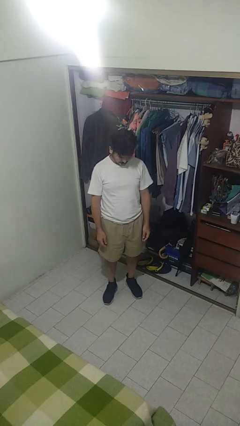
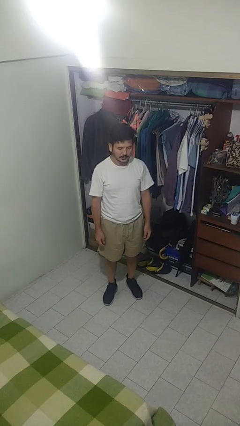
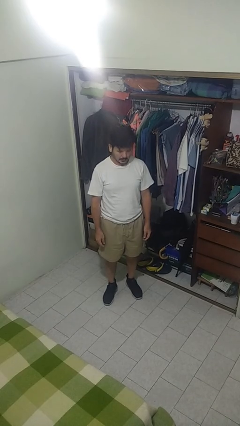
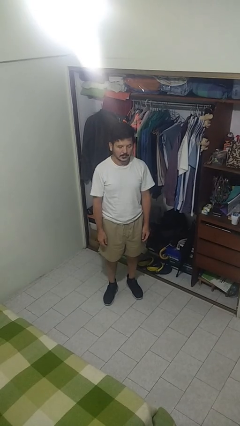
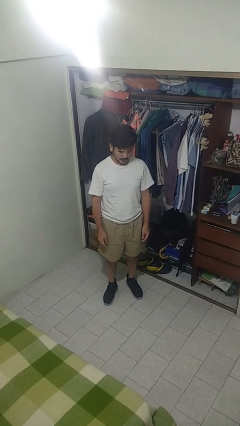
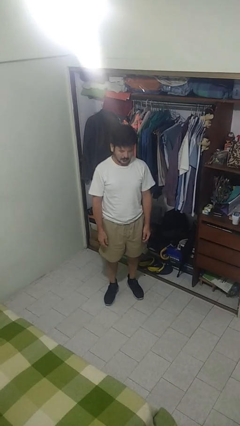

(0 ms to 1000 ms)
person nods head

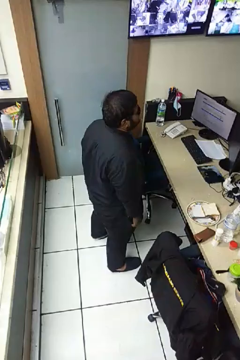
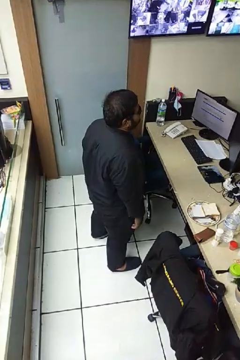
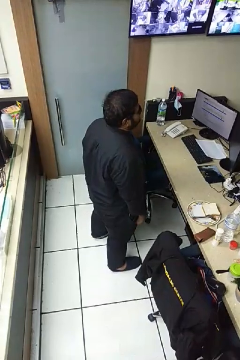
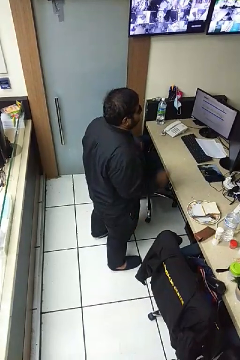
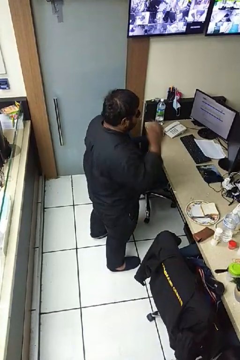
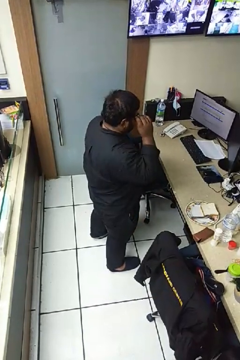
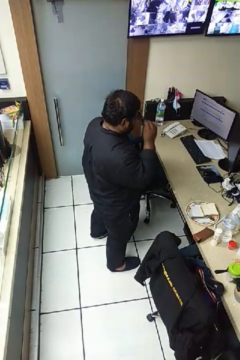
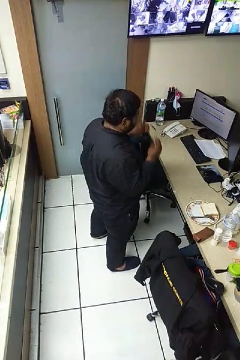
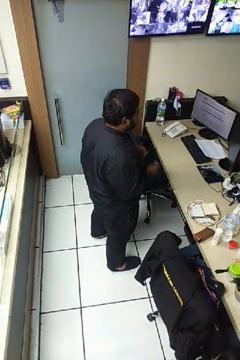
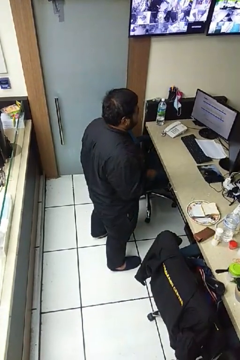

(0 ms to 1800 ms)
person takes off sunglasses

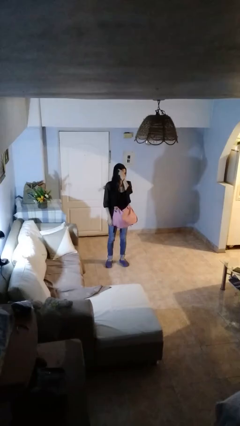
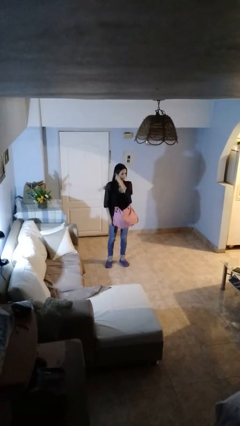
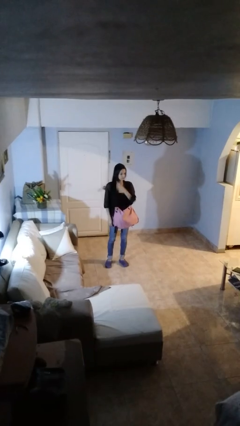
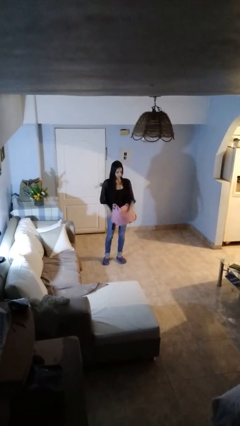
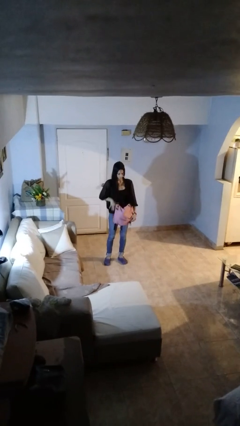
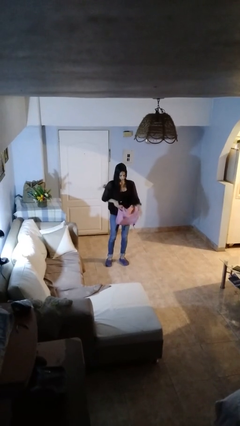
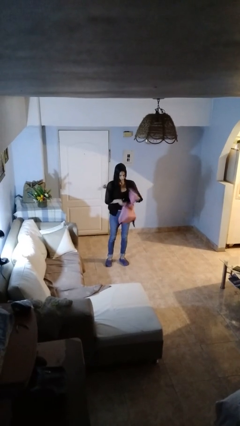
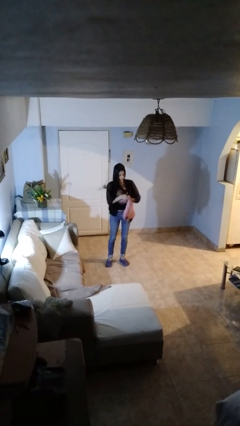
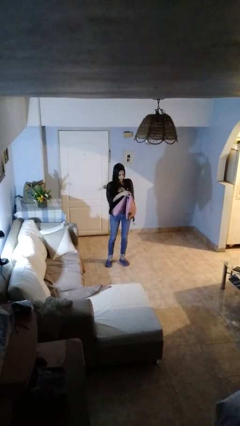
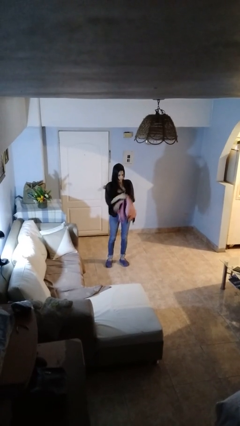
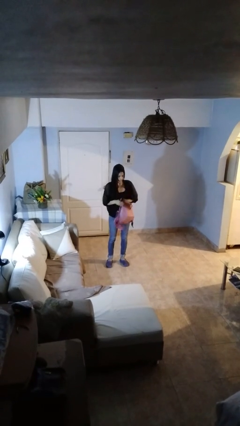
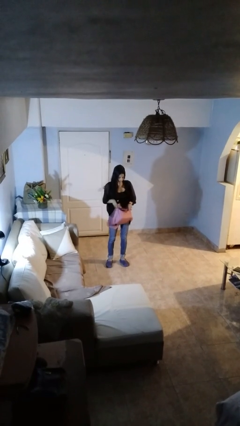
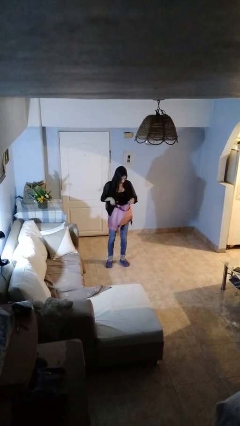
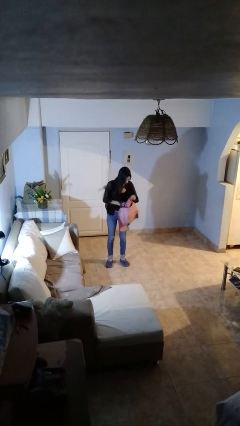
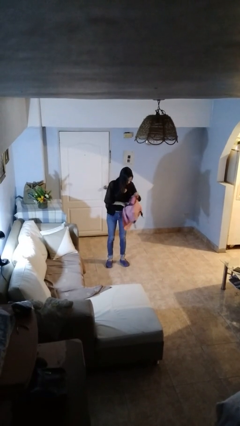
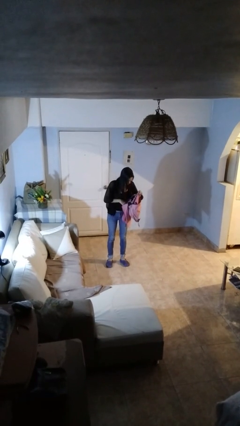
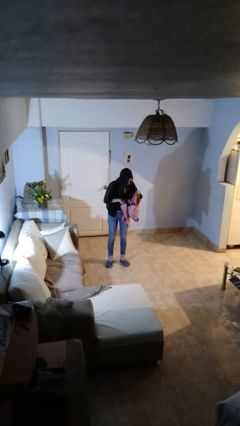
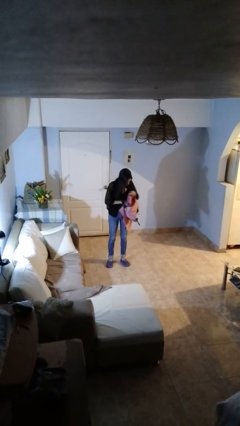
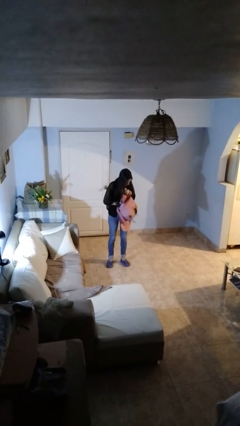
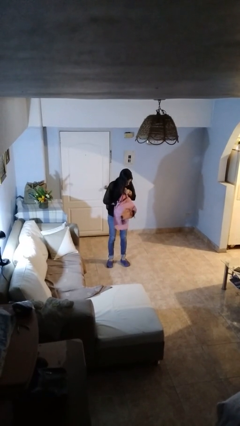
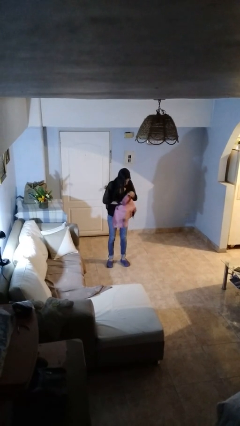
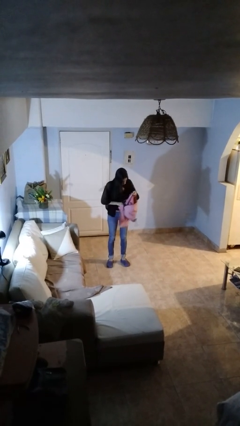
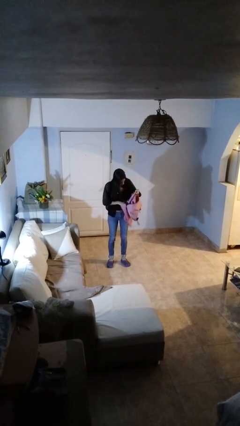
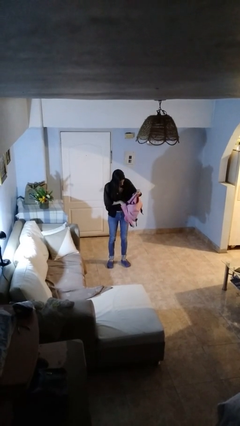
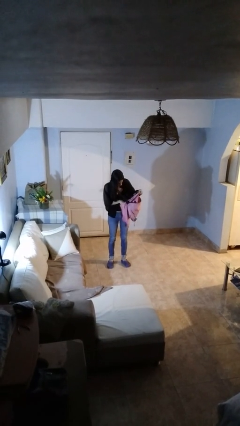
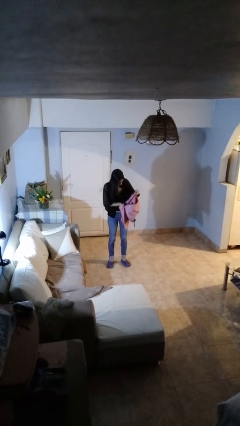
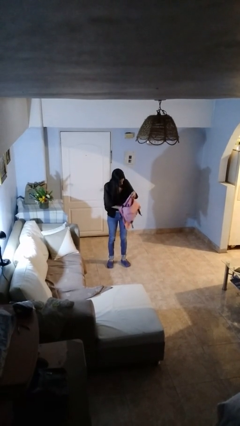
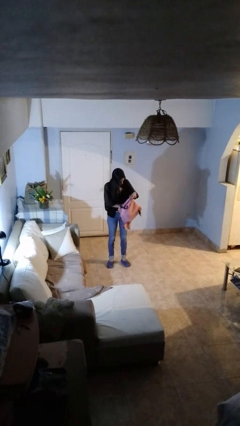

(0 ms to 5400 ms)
person searches in backpack

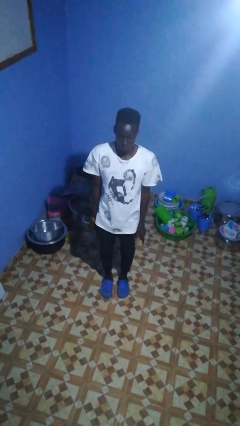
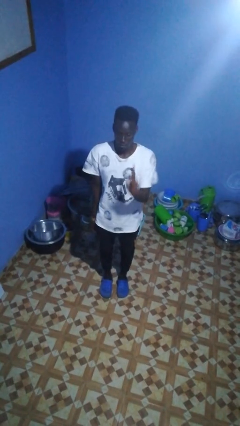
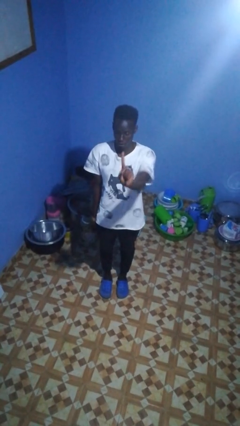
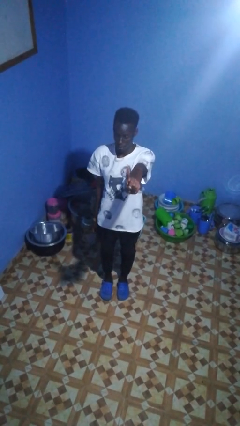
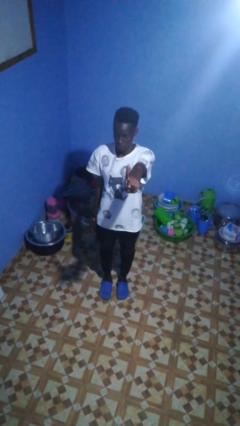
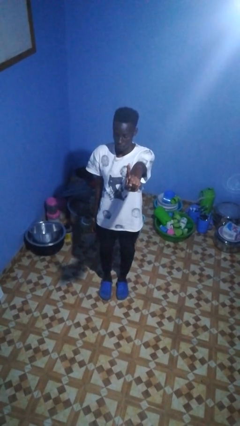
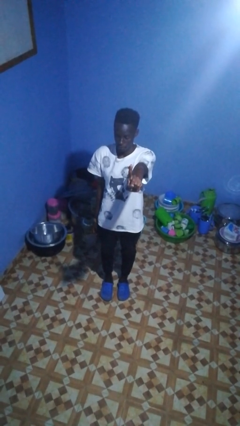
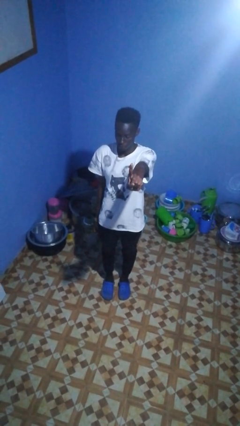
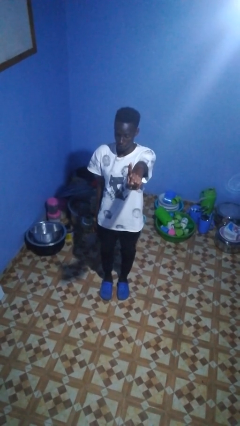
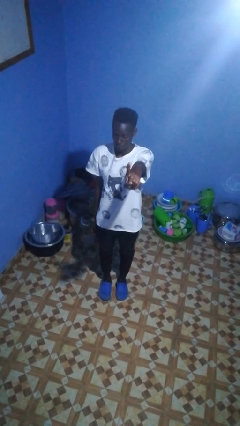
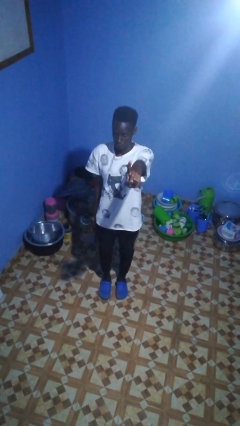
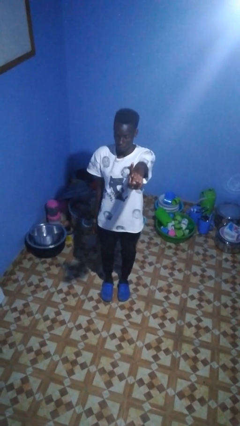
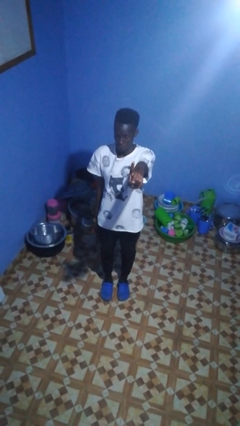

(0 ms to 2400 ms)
person gestures number one

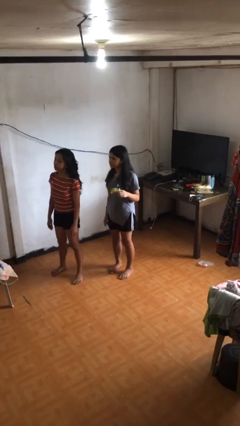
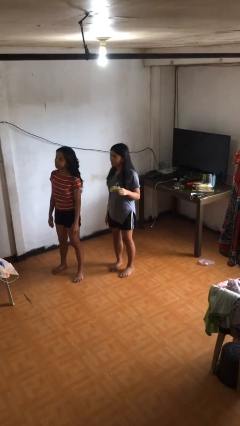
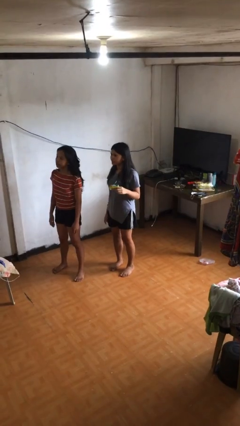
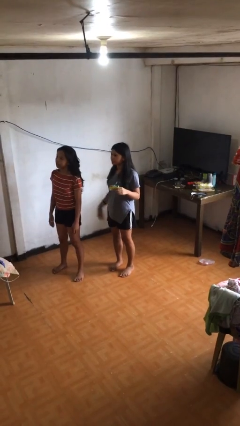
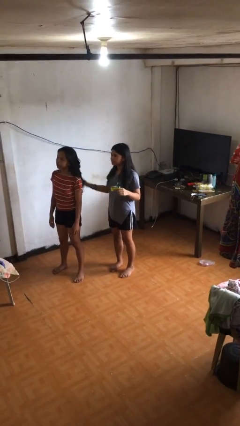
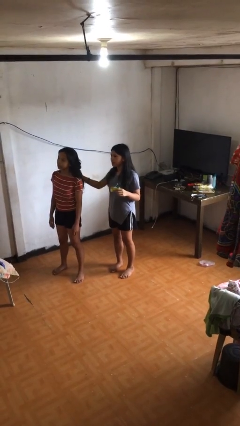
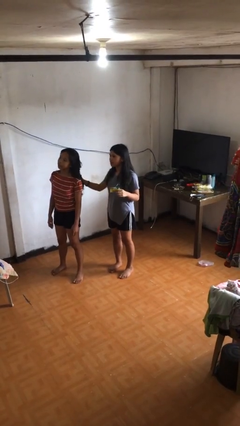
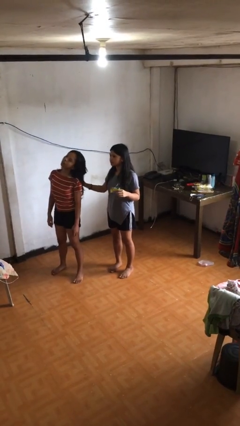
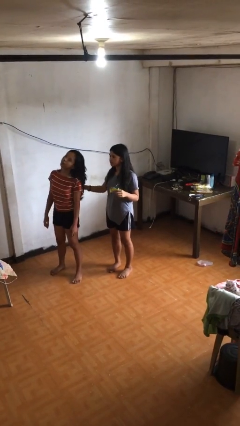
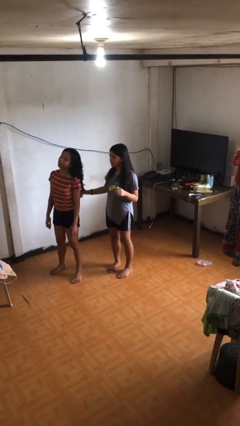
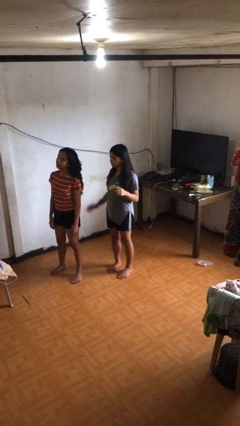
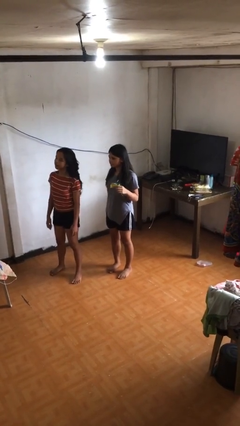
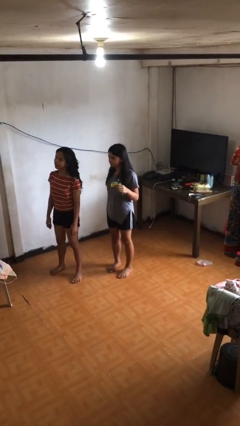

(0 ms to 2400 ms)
person grabs person by hair

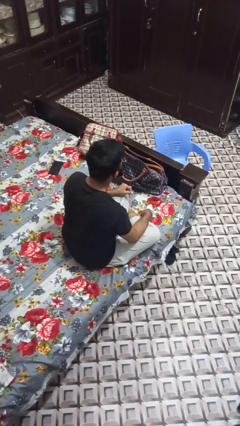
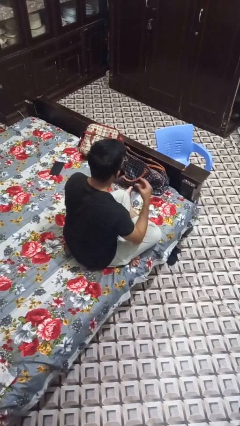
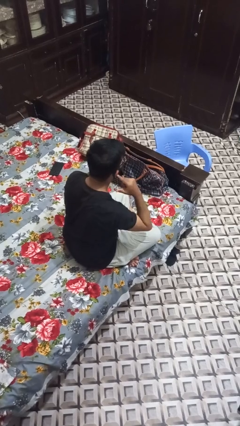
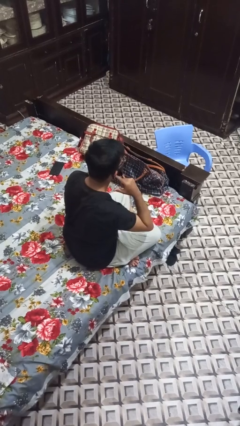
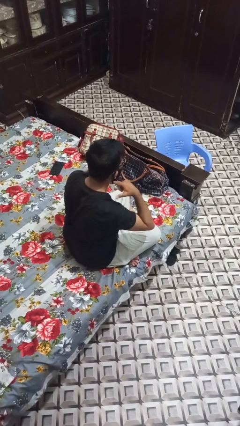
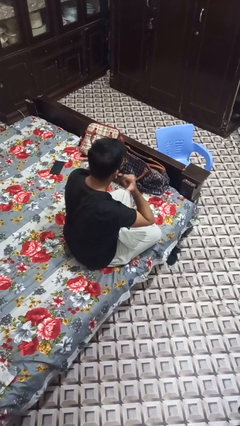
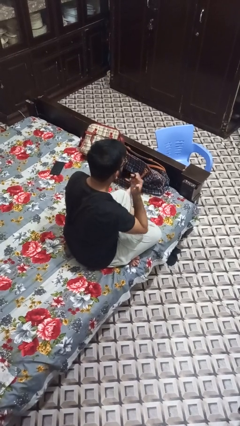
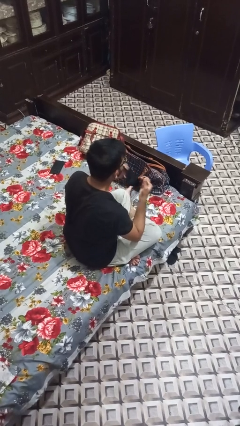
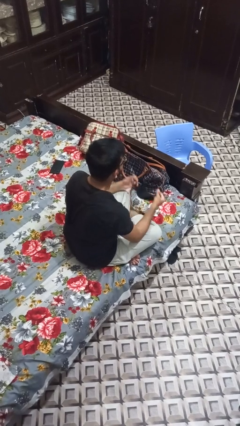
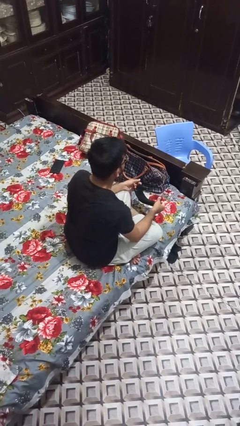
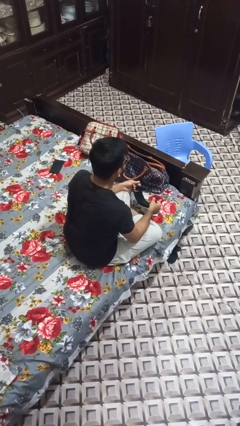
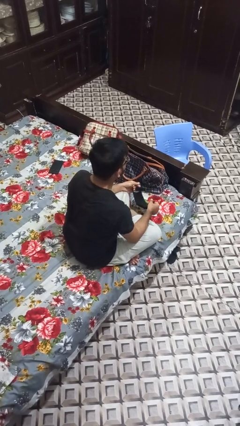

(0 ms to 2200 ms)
person takes off facemask

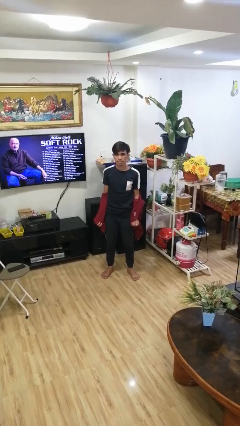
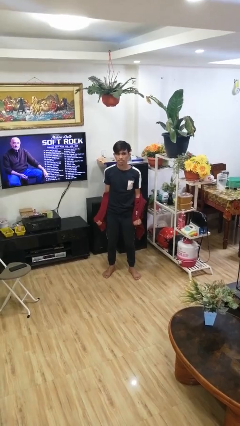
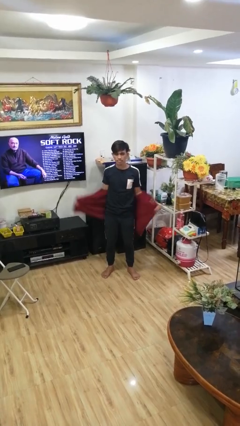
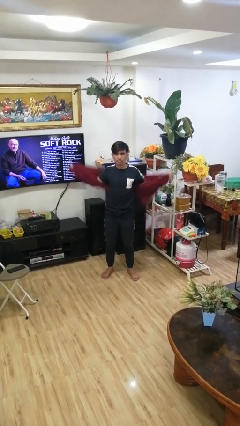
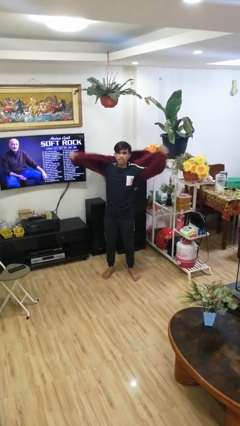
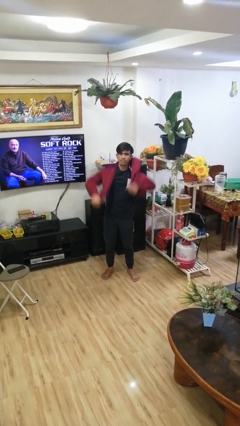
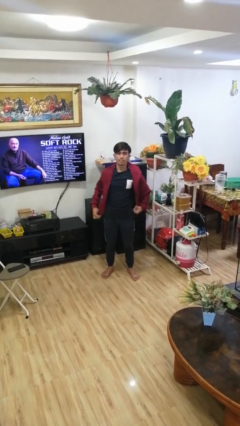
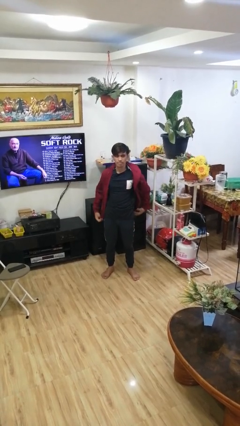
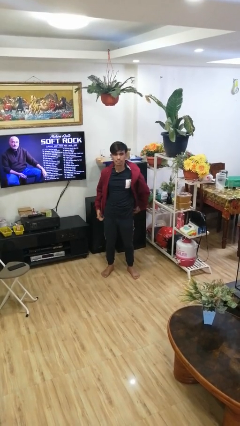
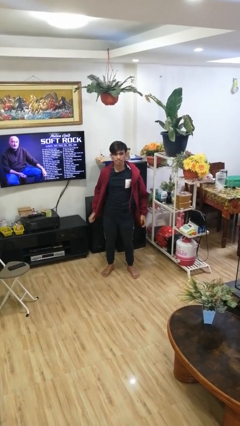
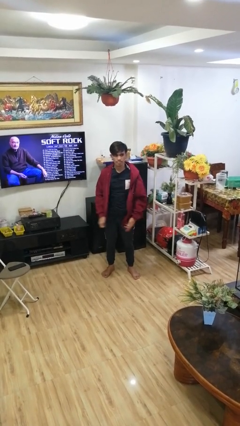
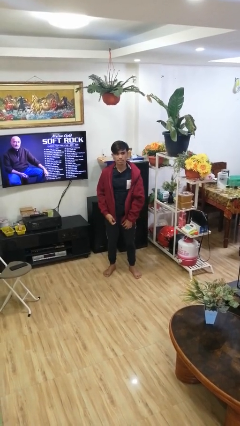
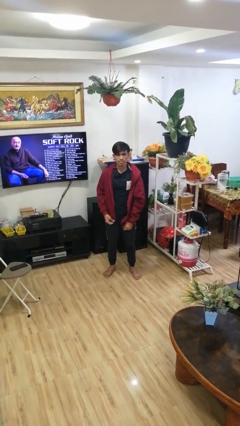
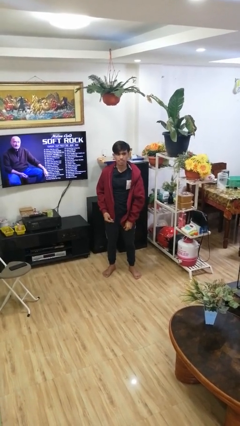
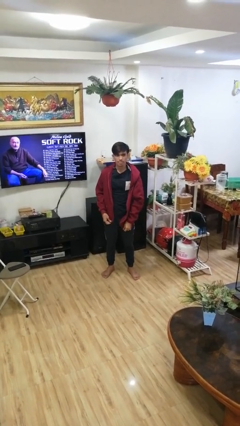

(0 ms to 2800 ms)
person puts on jacket
